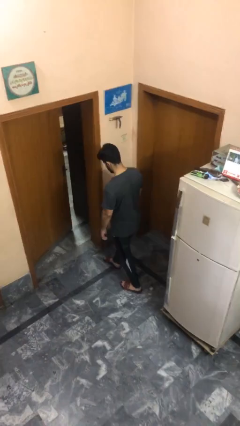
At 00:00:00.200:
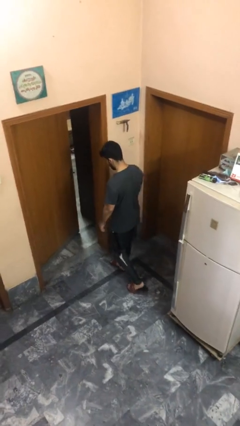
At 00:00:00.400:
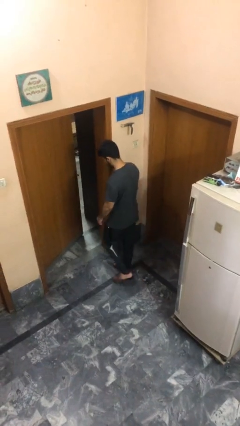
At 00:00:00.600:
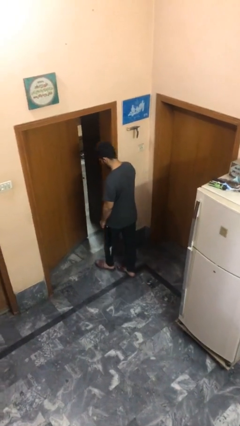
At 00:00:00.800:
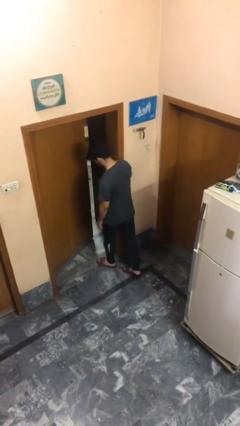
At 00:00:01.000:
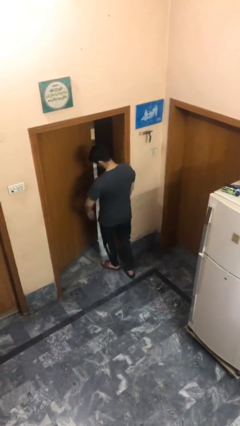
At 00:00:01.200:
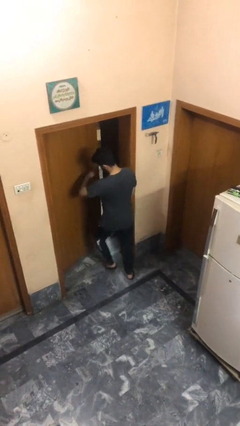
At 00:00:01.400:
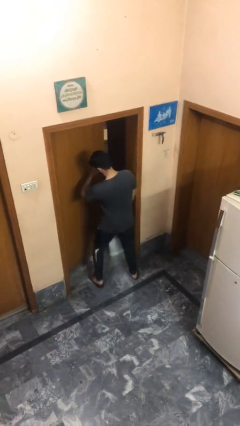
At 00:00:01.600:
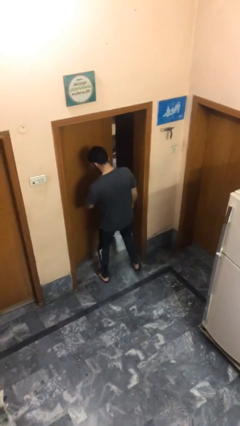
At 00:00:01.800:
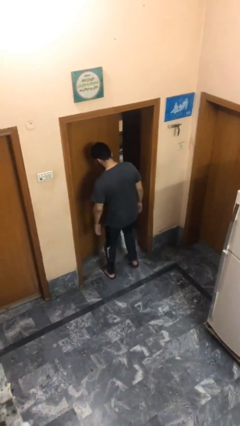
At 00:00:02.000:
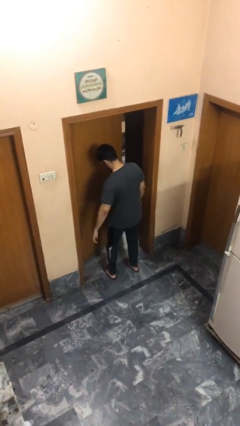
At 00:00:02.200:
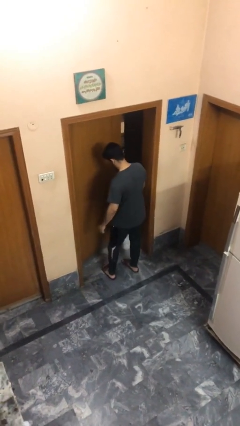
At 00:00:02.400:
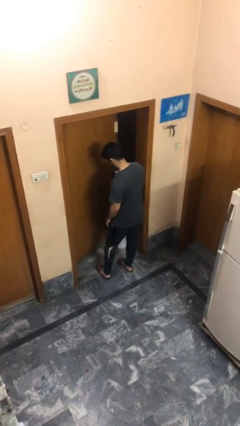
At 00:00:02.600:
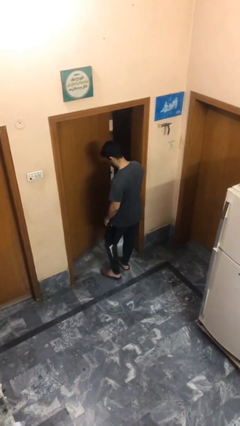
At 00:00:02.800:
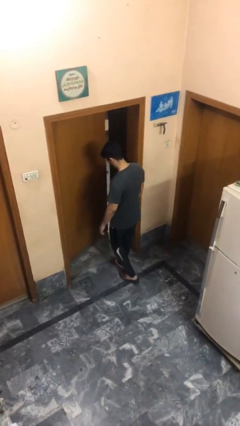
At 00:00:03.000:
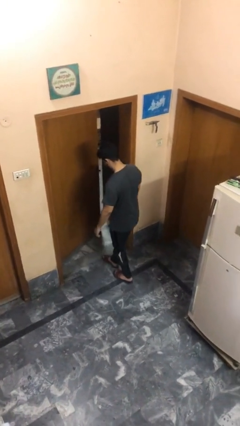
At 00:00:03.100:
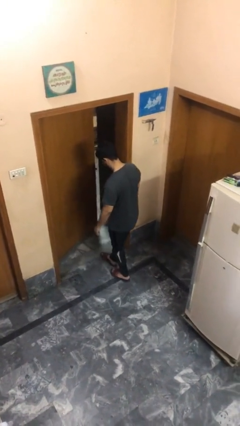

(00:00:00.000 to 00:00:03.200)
person bumps into wall

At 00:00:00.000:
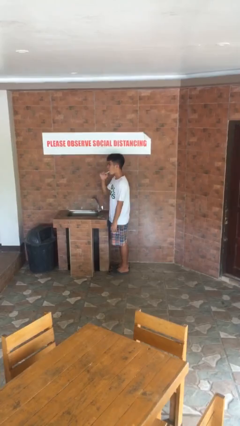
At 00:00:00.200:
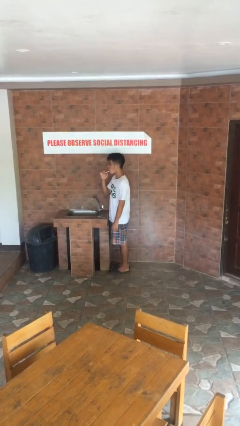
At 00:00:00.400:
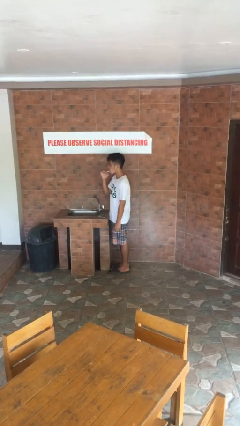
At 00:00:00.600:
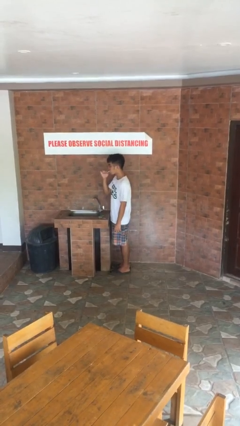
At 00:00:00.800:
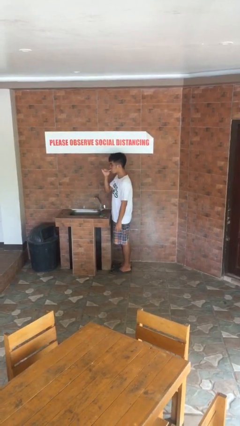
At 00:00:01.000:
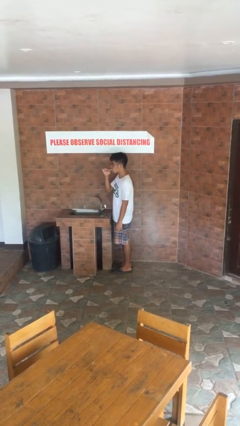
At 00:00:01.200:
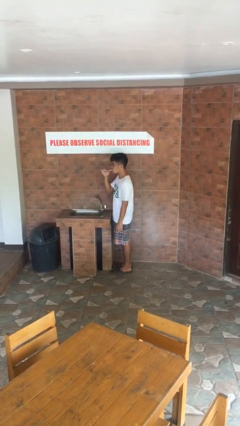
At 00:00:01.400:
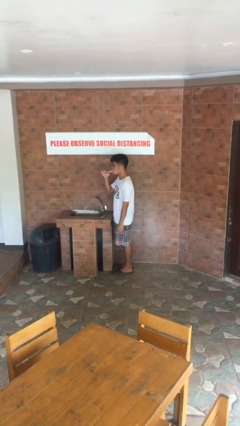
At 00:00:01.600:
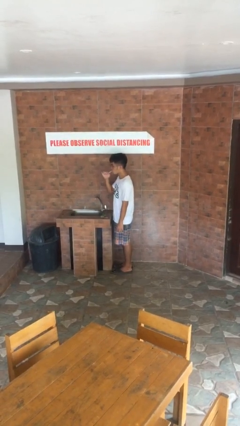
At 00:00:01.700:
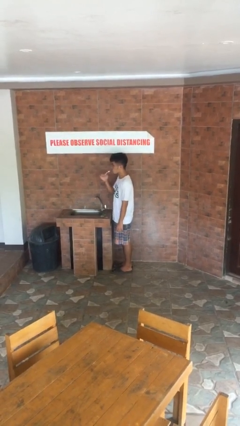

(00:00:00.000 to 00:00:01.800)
person brushes teeth

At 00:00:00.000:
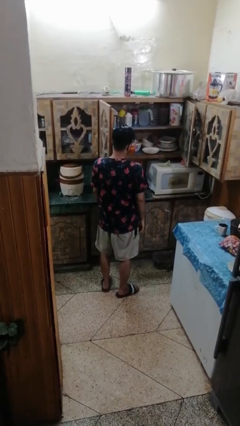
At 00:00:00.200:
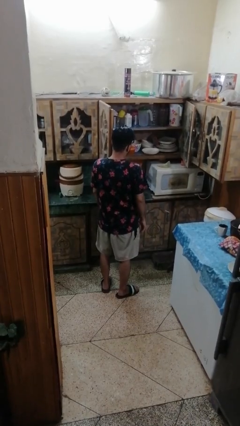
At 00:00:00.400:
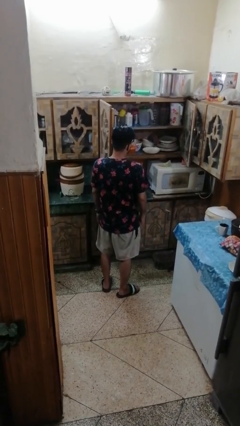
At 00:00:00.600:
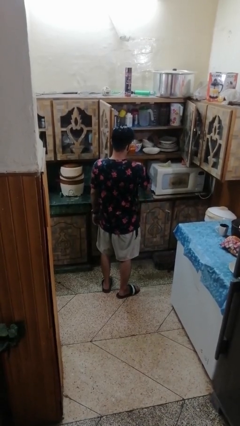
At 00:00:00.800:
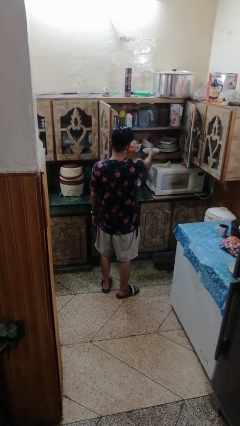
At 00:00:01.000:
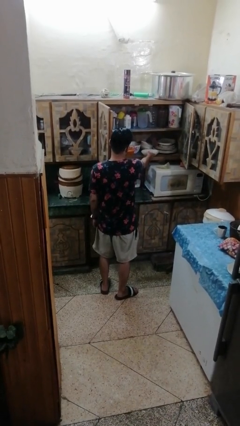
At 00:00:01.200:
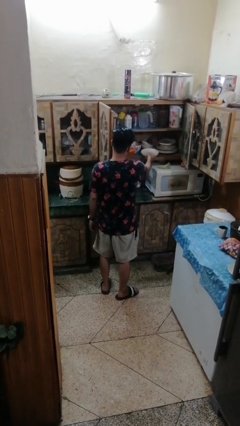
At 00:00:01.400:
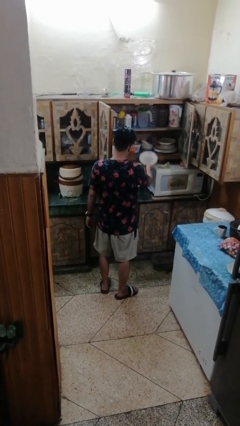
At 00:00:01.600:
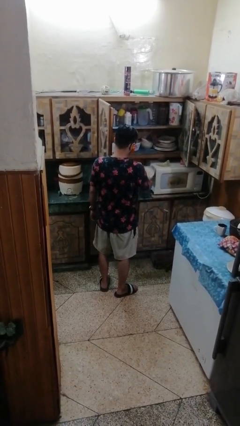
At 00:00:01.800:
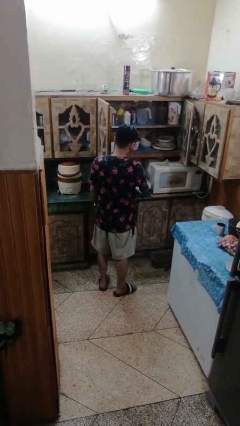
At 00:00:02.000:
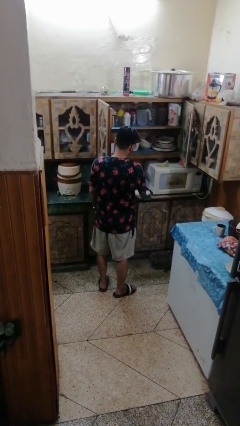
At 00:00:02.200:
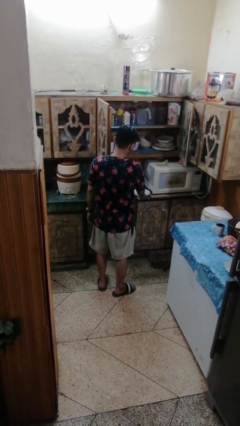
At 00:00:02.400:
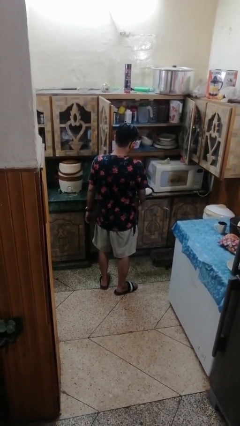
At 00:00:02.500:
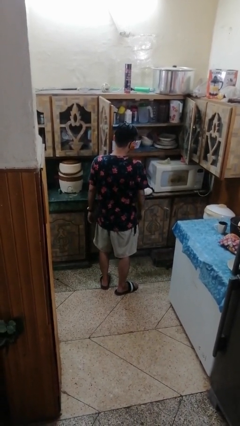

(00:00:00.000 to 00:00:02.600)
person takes object from cabinet

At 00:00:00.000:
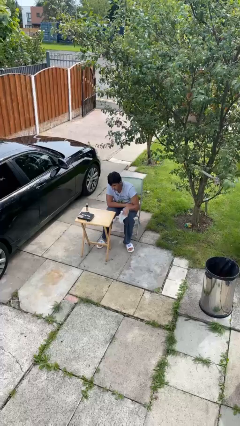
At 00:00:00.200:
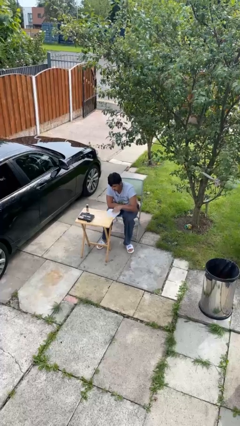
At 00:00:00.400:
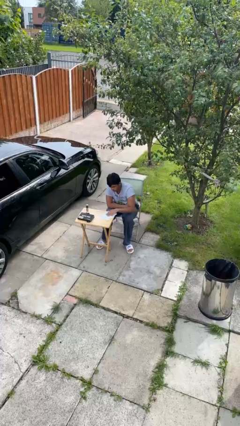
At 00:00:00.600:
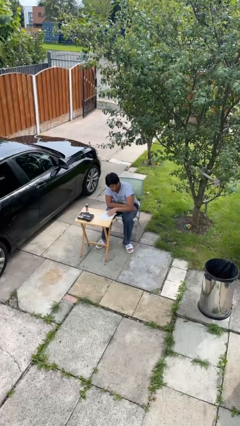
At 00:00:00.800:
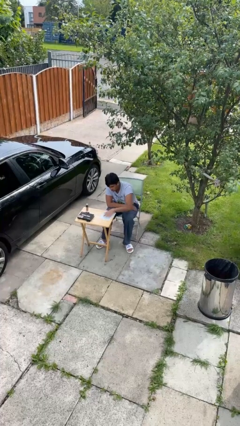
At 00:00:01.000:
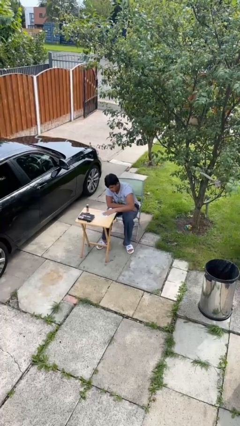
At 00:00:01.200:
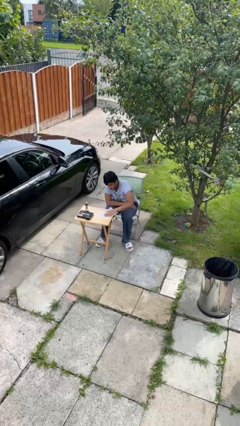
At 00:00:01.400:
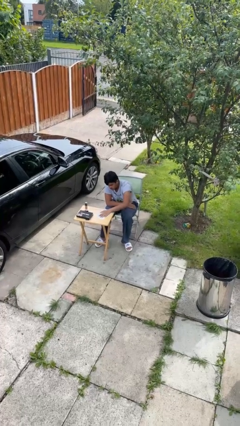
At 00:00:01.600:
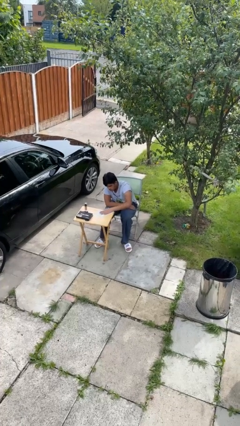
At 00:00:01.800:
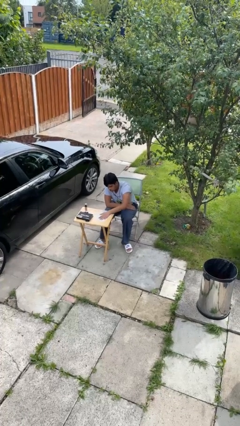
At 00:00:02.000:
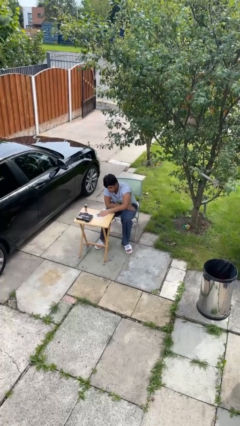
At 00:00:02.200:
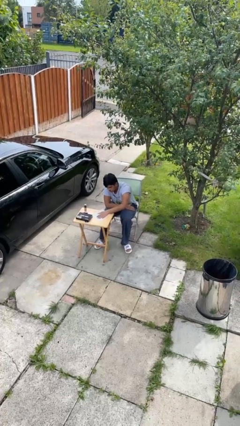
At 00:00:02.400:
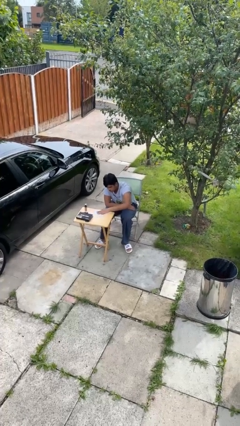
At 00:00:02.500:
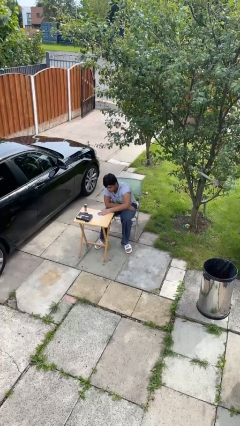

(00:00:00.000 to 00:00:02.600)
person cleans table with rag

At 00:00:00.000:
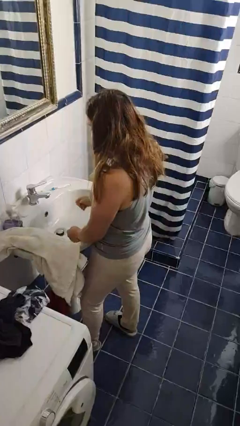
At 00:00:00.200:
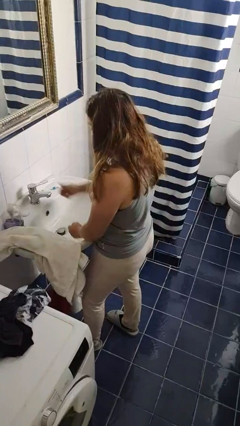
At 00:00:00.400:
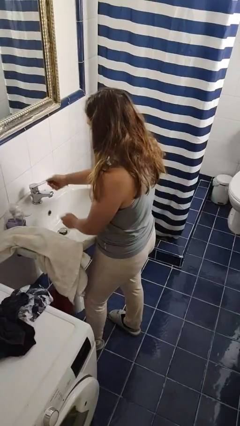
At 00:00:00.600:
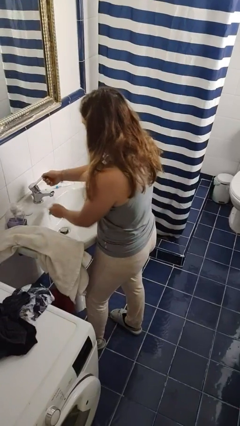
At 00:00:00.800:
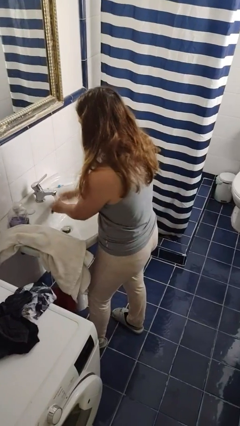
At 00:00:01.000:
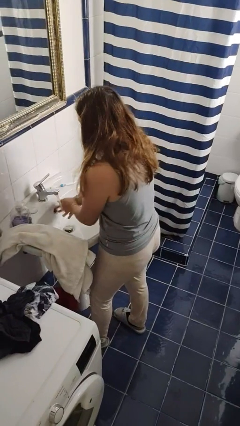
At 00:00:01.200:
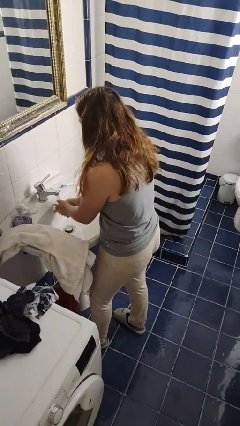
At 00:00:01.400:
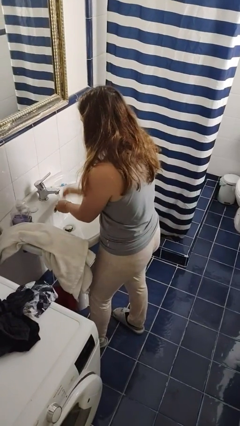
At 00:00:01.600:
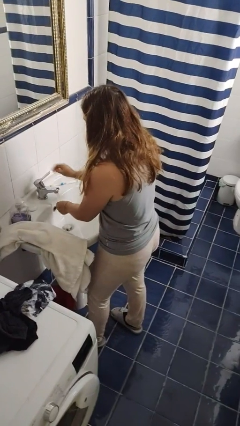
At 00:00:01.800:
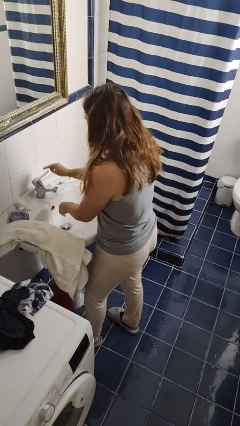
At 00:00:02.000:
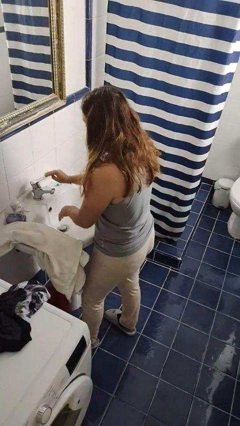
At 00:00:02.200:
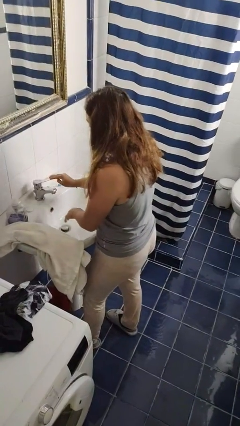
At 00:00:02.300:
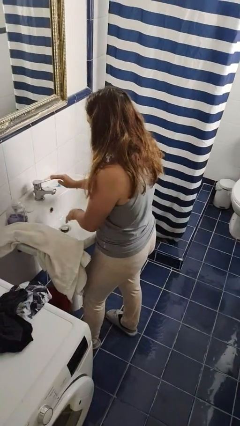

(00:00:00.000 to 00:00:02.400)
person washes hands

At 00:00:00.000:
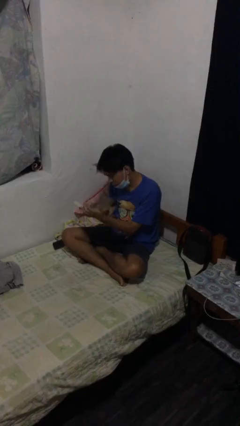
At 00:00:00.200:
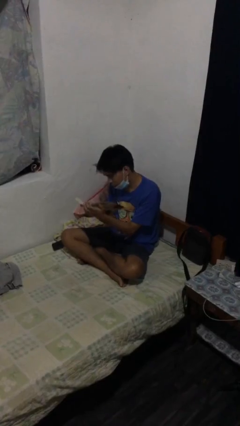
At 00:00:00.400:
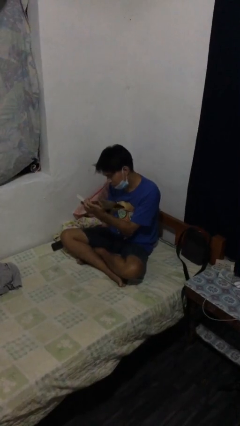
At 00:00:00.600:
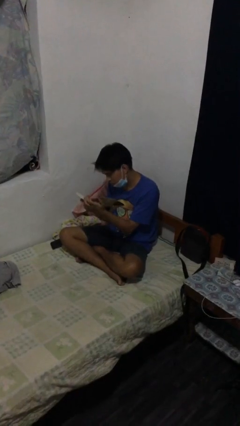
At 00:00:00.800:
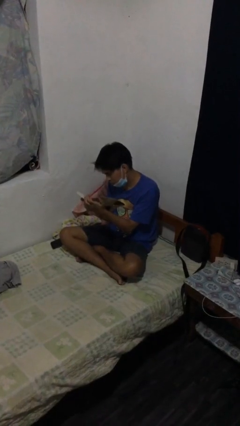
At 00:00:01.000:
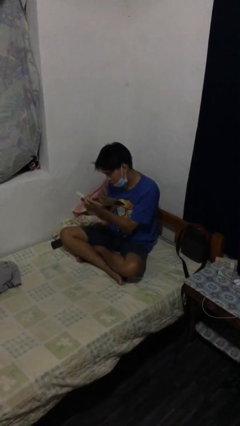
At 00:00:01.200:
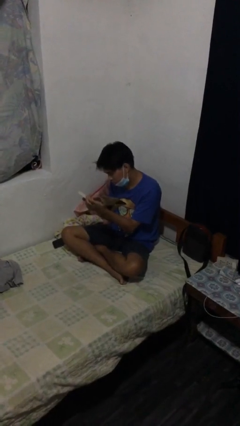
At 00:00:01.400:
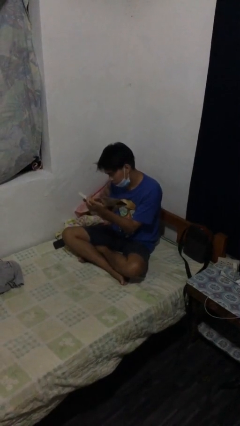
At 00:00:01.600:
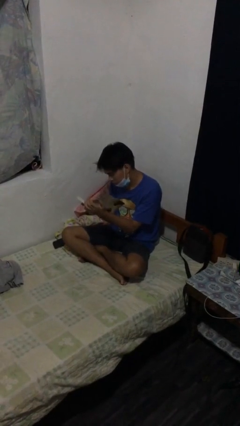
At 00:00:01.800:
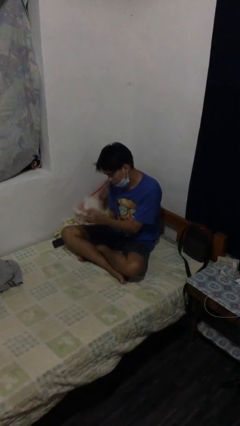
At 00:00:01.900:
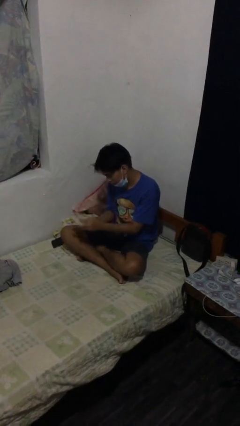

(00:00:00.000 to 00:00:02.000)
person reads document

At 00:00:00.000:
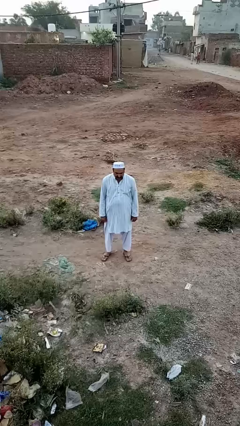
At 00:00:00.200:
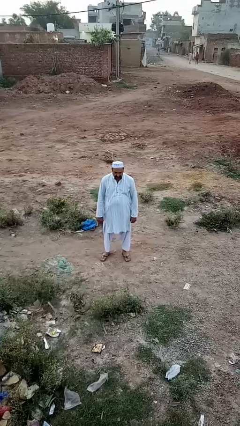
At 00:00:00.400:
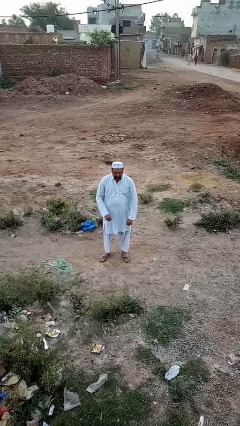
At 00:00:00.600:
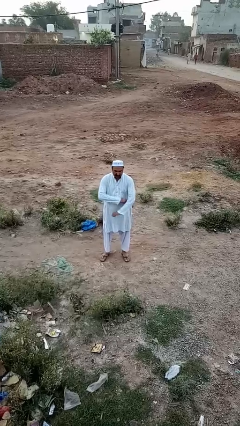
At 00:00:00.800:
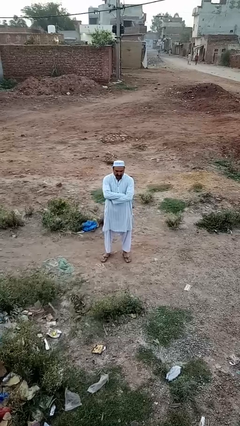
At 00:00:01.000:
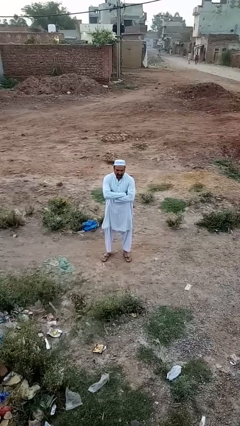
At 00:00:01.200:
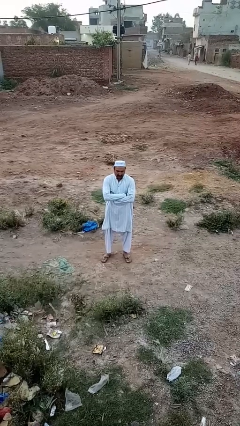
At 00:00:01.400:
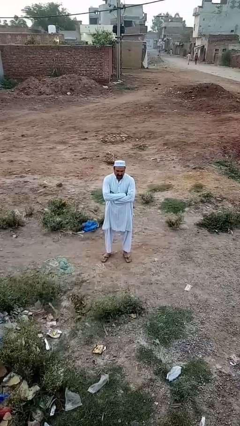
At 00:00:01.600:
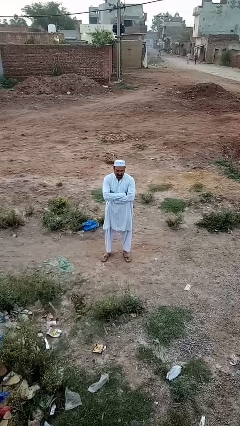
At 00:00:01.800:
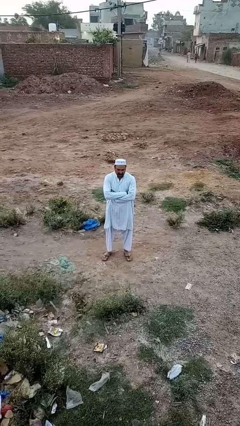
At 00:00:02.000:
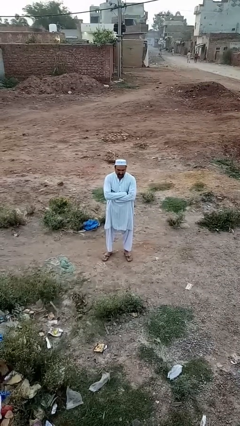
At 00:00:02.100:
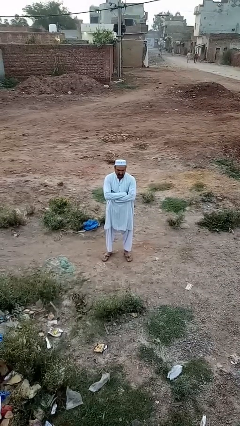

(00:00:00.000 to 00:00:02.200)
person crosses arms
